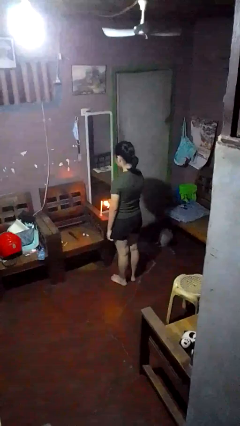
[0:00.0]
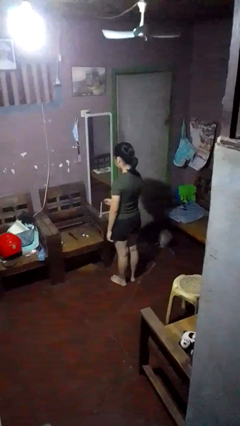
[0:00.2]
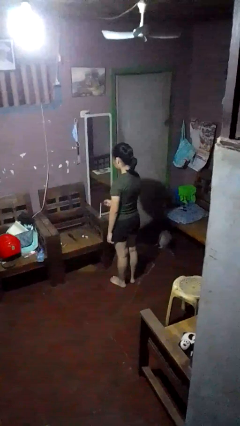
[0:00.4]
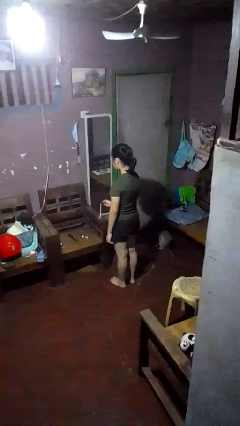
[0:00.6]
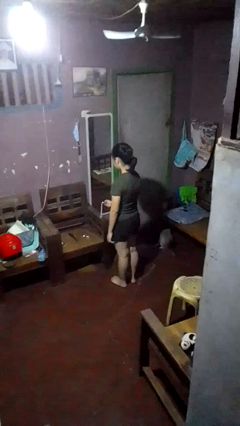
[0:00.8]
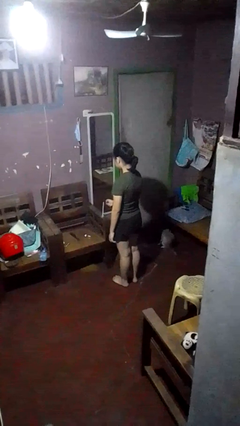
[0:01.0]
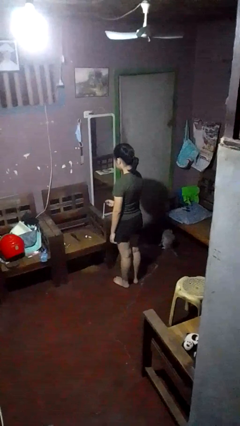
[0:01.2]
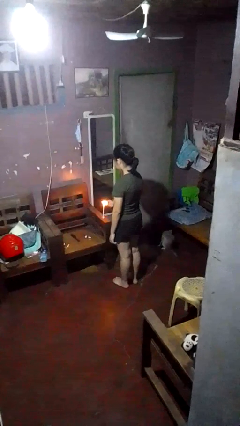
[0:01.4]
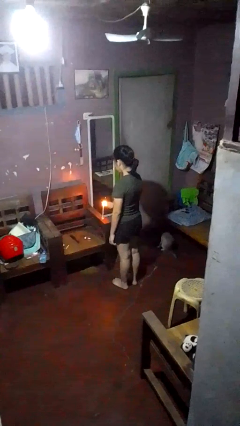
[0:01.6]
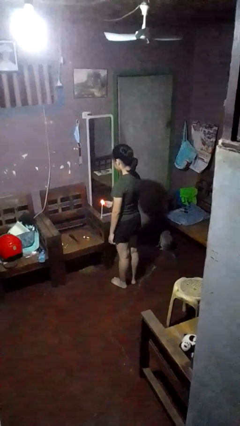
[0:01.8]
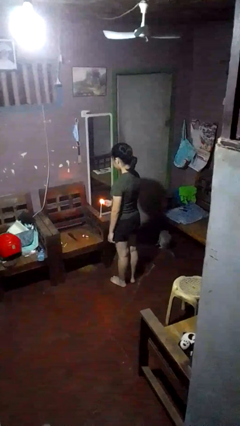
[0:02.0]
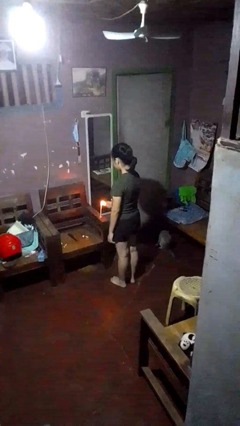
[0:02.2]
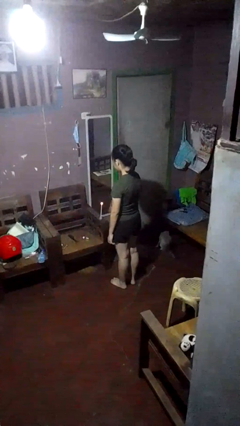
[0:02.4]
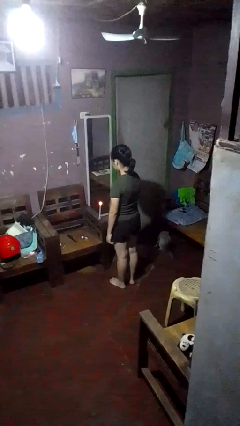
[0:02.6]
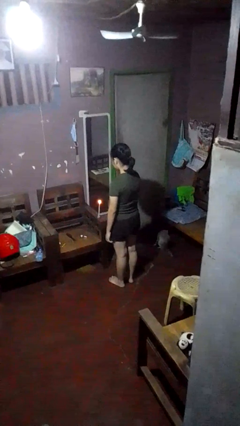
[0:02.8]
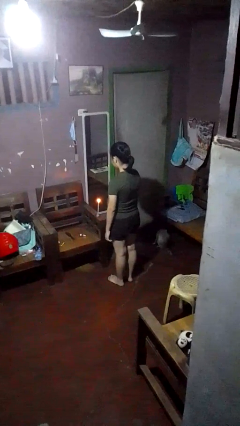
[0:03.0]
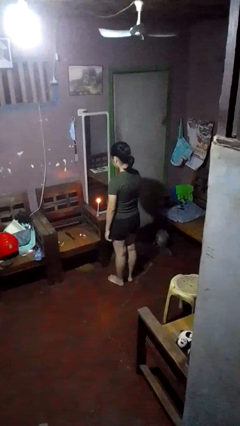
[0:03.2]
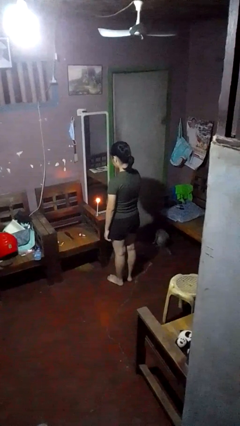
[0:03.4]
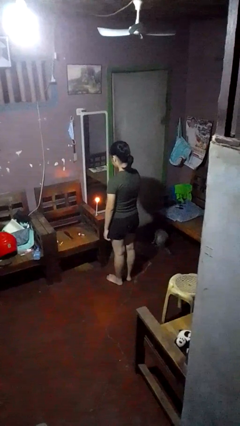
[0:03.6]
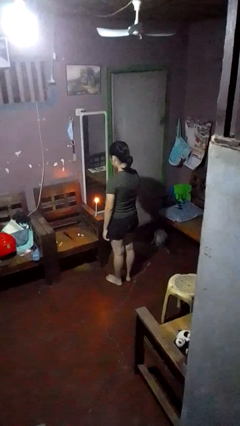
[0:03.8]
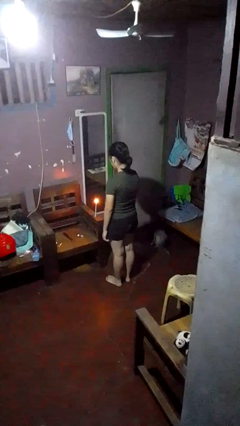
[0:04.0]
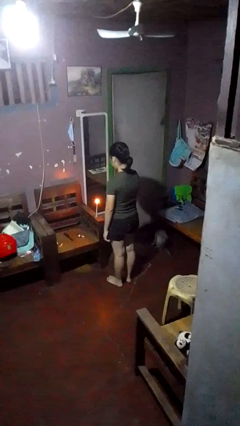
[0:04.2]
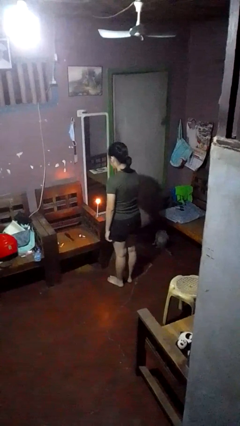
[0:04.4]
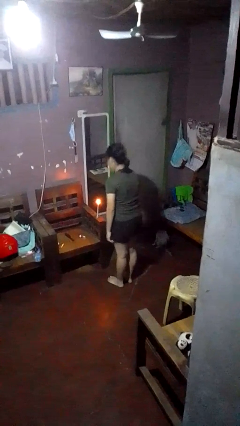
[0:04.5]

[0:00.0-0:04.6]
person lights candle

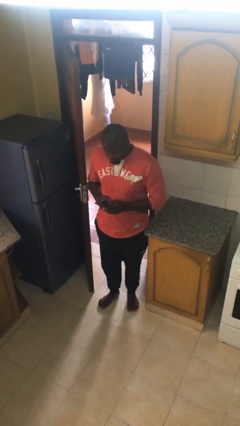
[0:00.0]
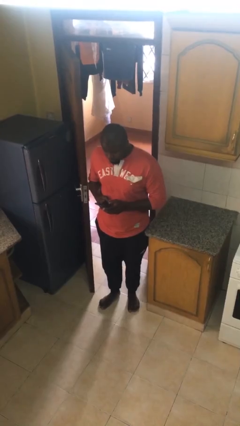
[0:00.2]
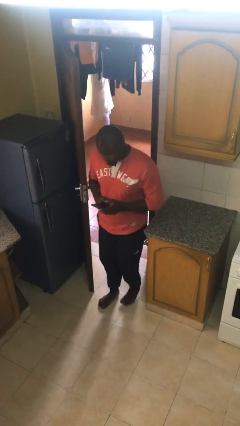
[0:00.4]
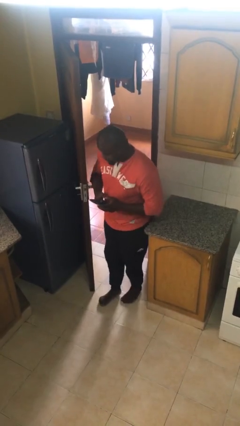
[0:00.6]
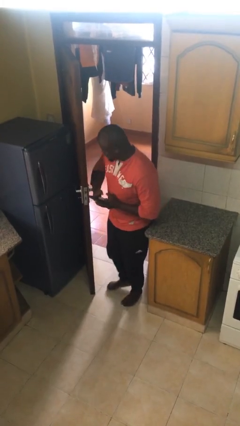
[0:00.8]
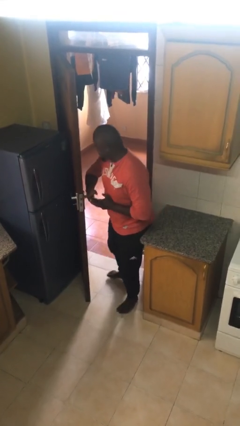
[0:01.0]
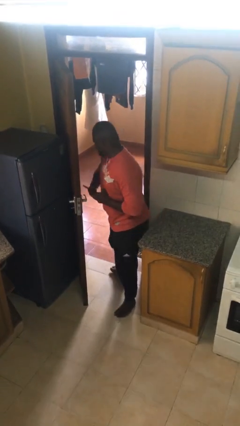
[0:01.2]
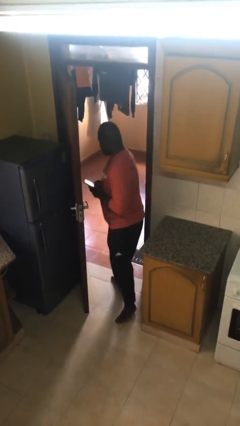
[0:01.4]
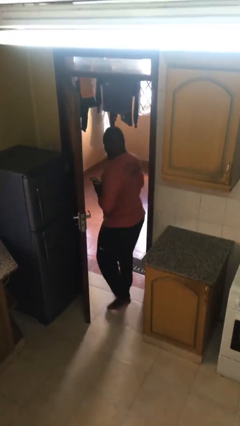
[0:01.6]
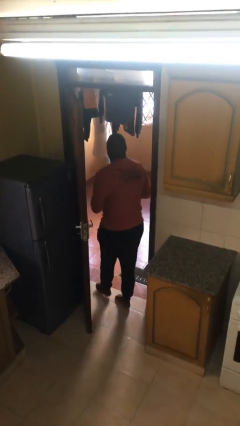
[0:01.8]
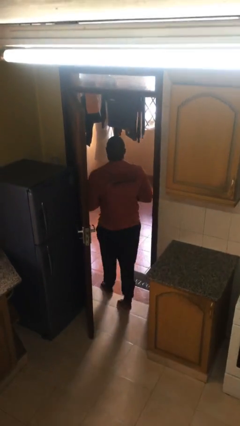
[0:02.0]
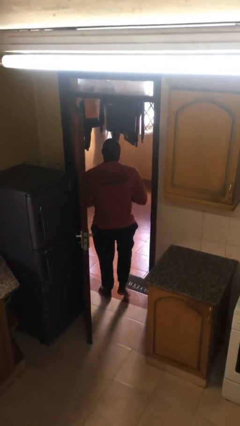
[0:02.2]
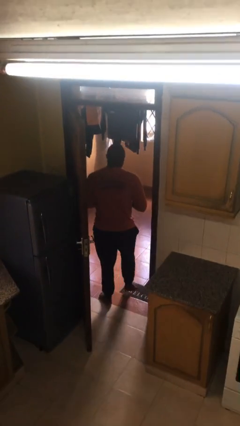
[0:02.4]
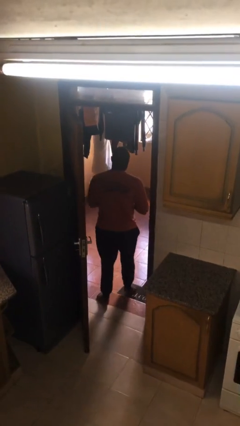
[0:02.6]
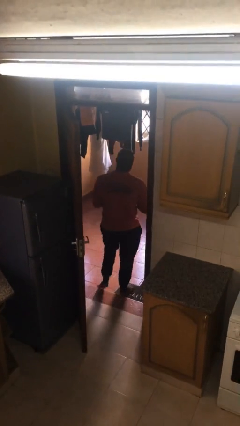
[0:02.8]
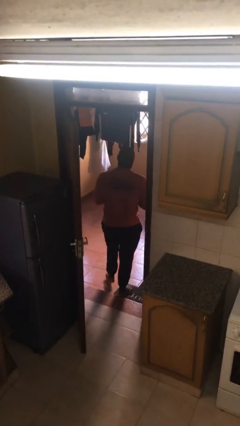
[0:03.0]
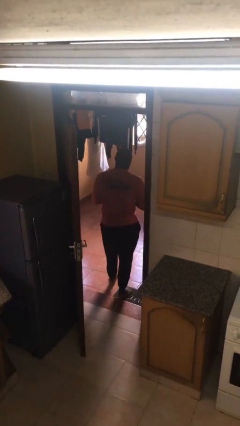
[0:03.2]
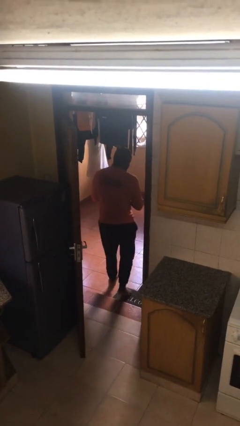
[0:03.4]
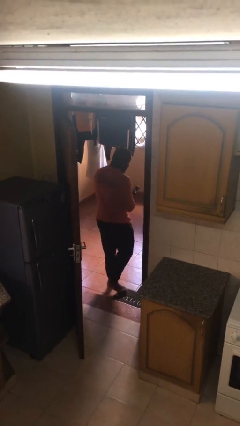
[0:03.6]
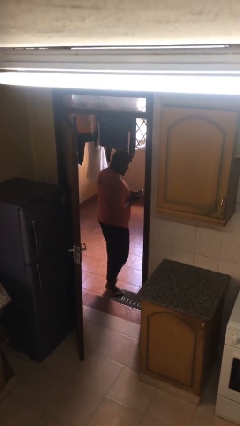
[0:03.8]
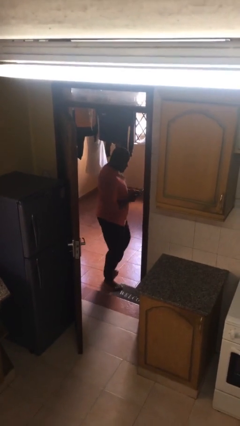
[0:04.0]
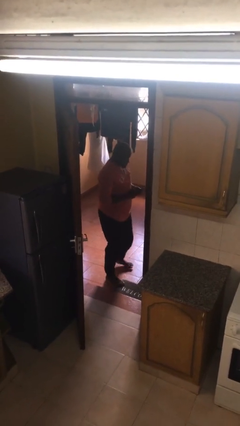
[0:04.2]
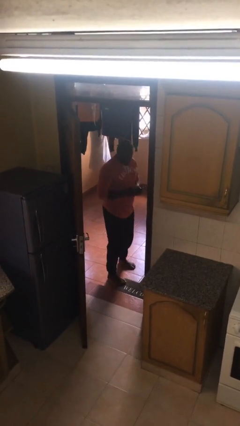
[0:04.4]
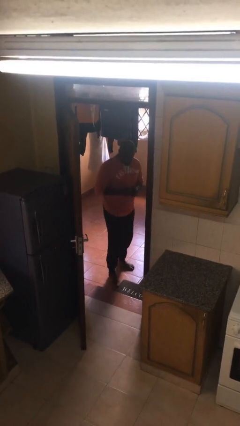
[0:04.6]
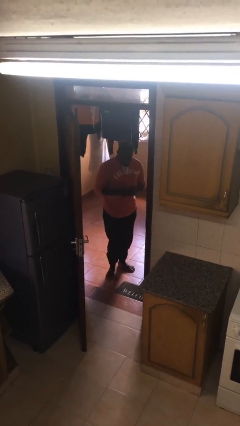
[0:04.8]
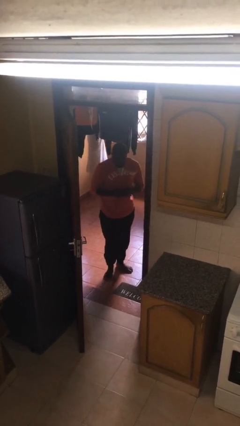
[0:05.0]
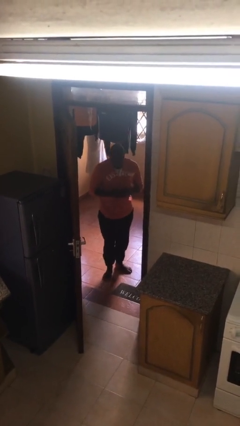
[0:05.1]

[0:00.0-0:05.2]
person exits scene through structure

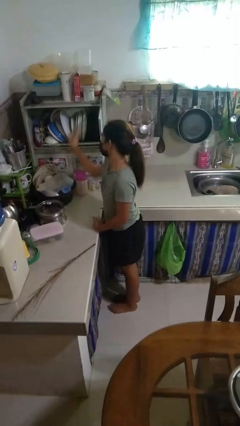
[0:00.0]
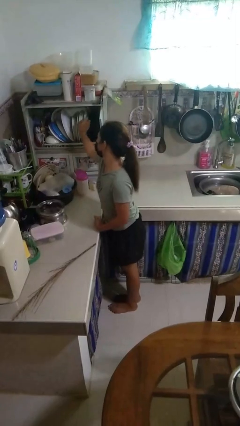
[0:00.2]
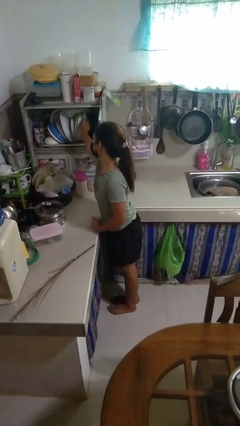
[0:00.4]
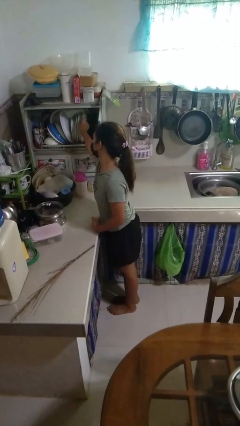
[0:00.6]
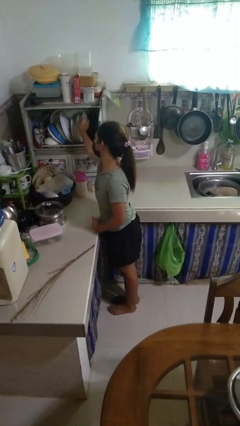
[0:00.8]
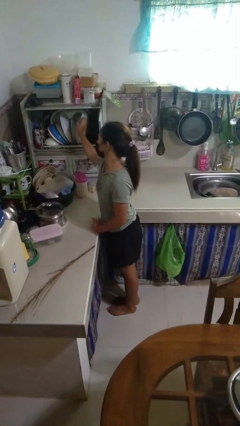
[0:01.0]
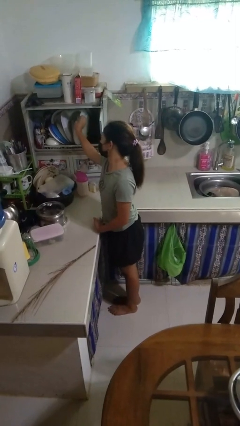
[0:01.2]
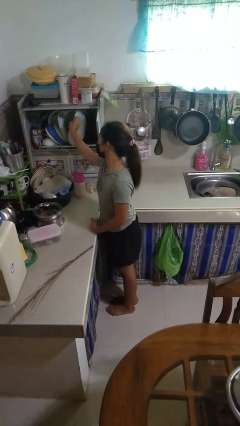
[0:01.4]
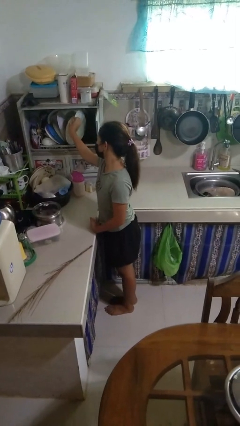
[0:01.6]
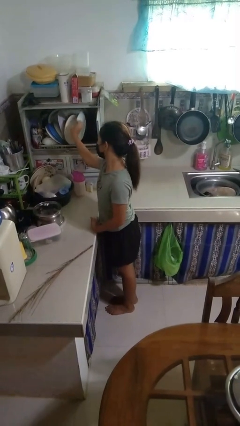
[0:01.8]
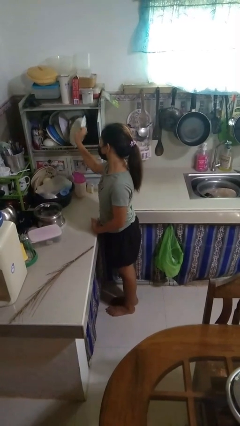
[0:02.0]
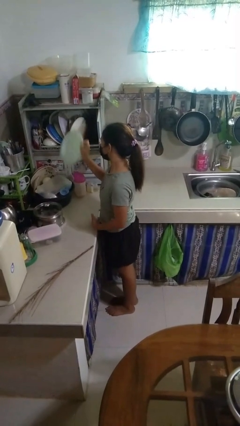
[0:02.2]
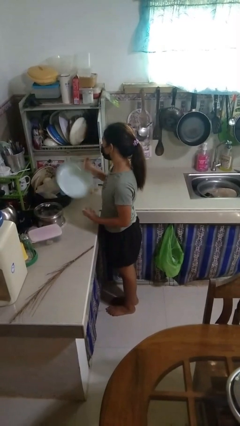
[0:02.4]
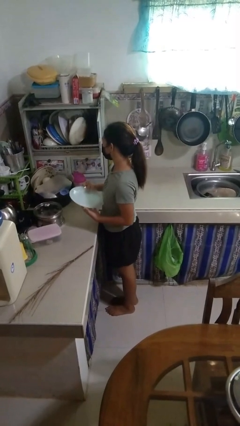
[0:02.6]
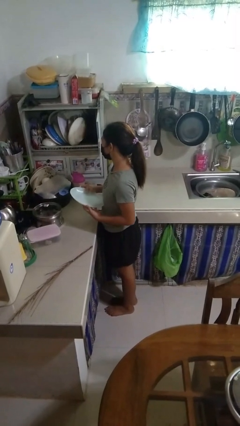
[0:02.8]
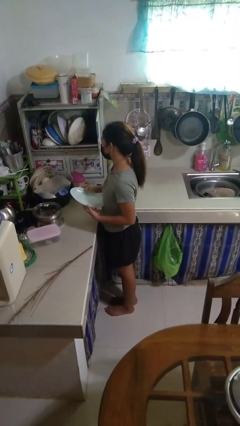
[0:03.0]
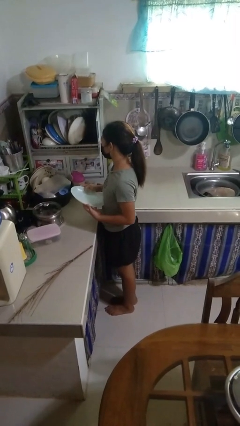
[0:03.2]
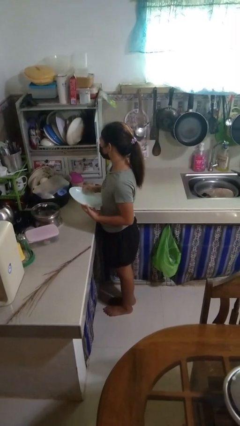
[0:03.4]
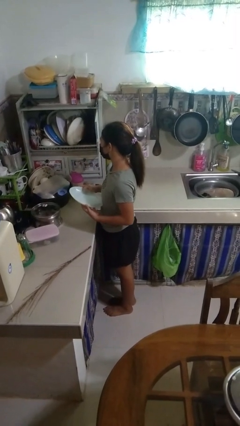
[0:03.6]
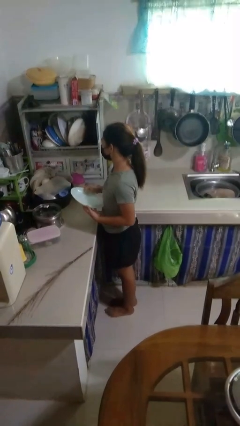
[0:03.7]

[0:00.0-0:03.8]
person takes object from kitchen drawer

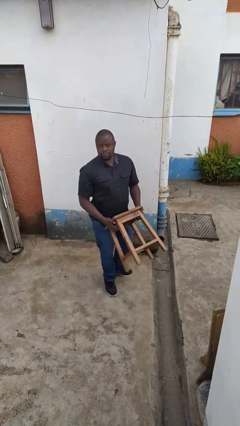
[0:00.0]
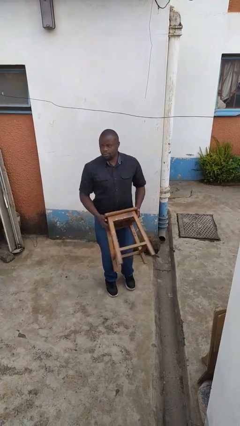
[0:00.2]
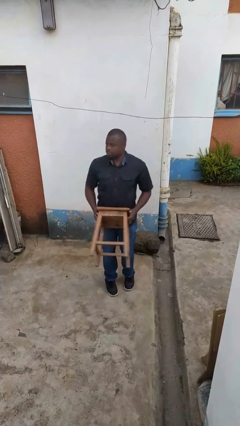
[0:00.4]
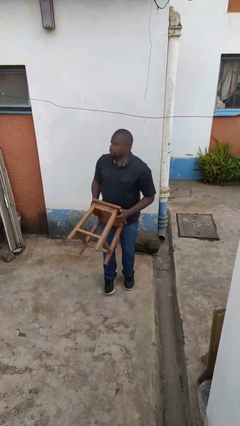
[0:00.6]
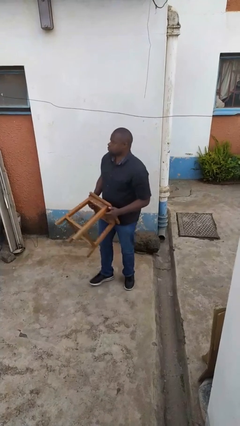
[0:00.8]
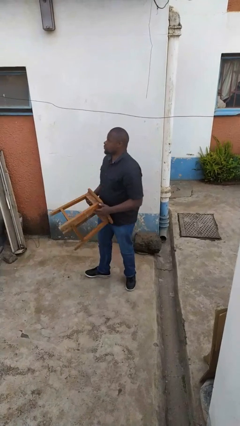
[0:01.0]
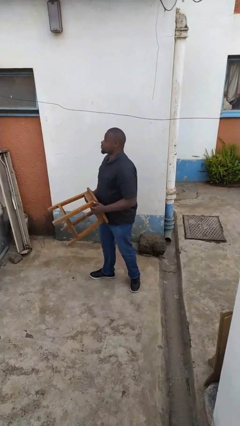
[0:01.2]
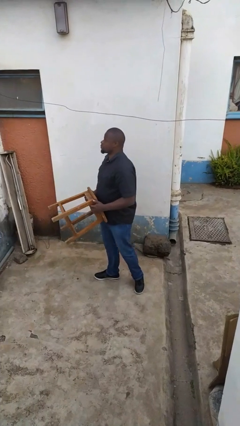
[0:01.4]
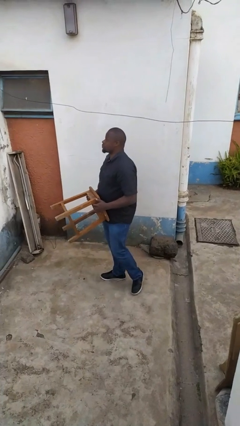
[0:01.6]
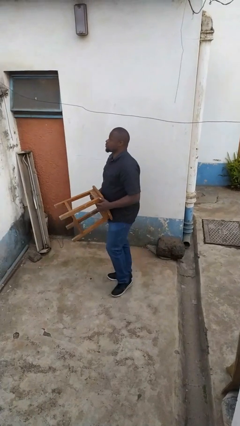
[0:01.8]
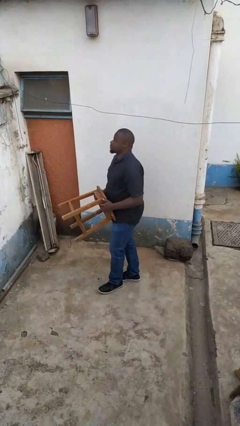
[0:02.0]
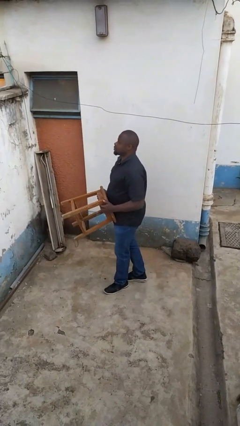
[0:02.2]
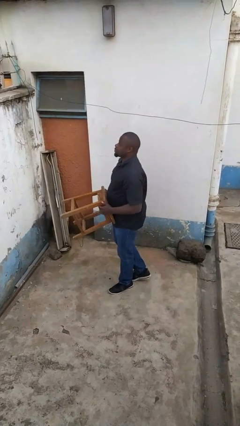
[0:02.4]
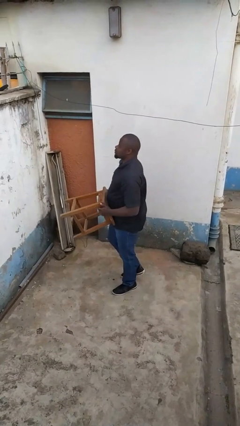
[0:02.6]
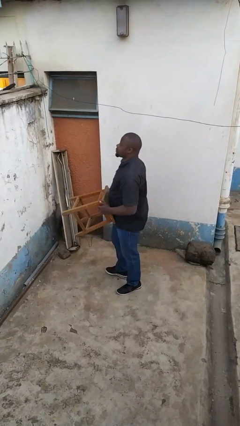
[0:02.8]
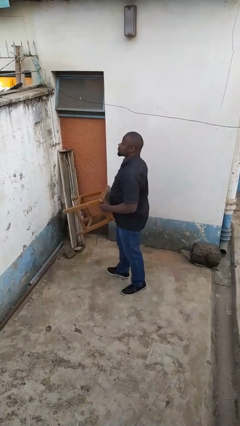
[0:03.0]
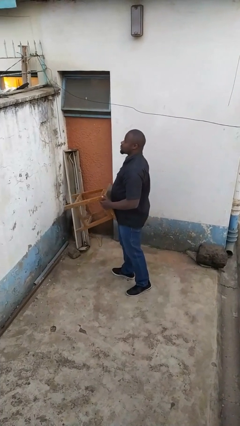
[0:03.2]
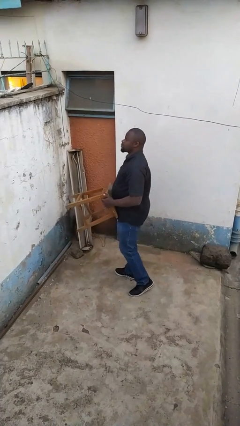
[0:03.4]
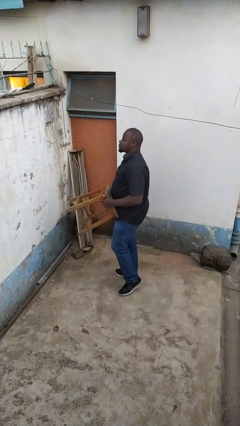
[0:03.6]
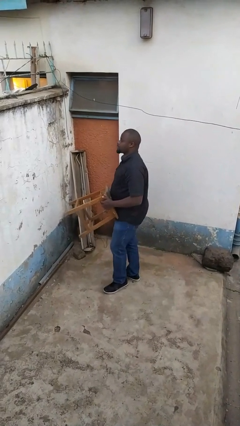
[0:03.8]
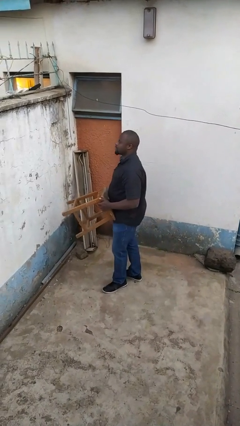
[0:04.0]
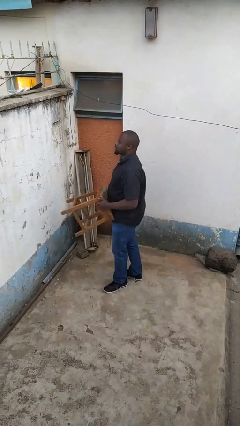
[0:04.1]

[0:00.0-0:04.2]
person carries furniture

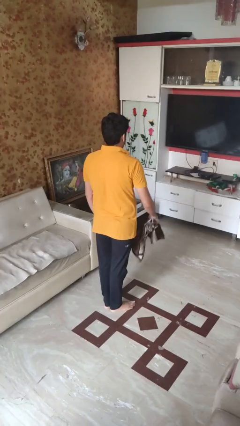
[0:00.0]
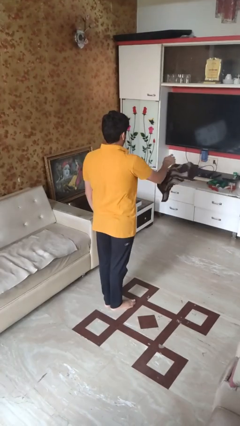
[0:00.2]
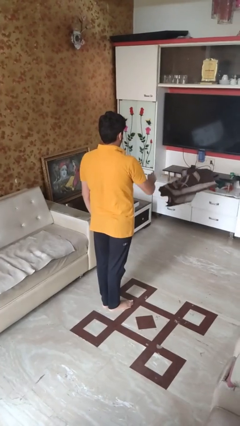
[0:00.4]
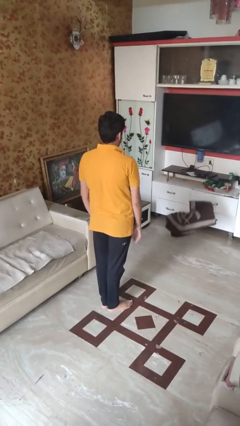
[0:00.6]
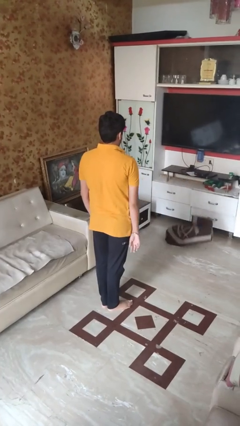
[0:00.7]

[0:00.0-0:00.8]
person throws object to ground
